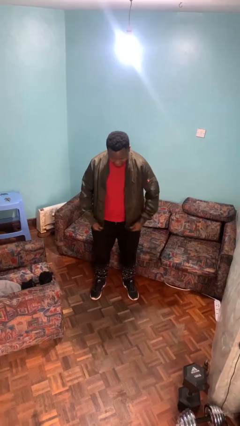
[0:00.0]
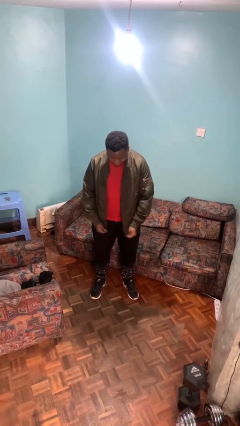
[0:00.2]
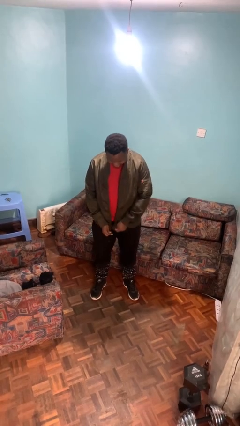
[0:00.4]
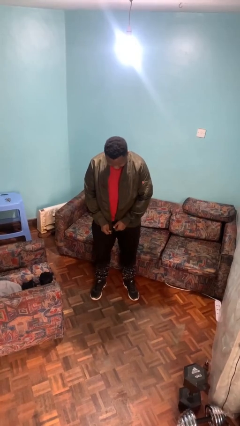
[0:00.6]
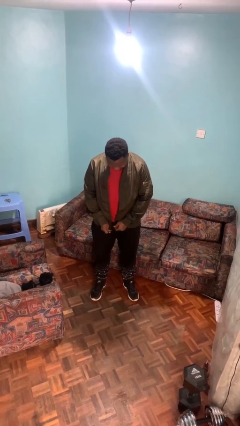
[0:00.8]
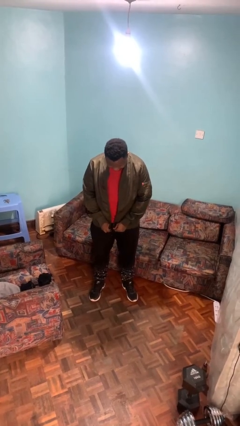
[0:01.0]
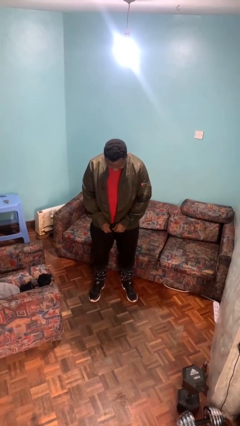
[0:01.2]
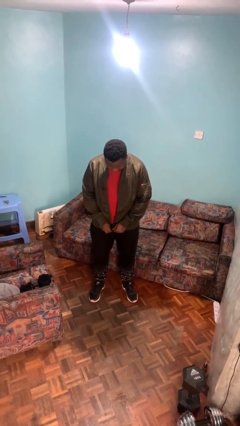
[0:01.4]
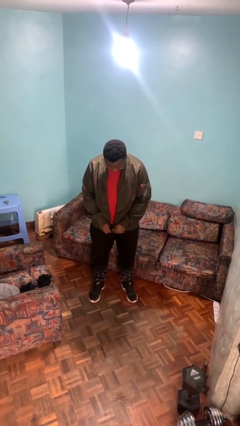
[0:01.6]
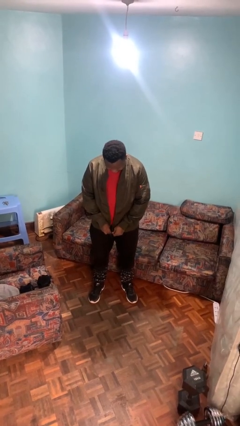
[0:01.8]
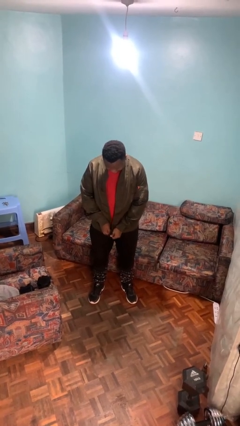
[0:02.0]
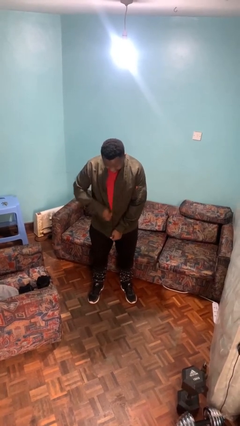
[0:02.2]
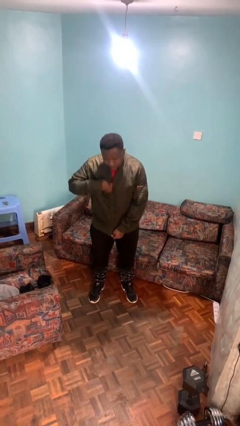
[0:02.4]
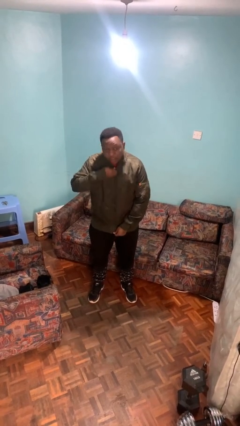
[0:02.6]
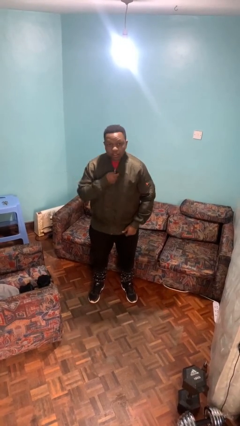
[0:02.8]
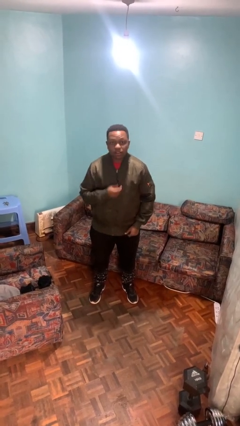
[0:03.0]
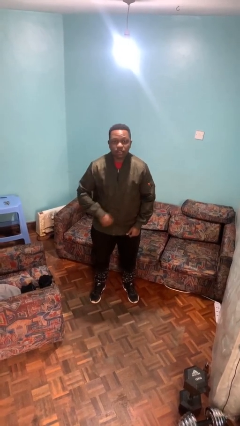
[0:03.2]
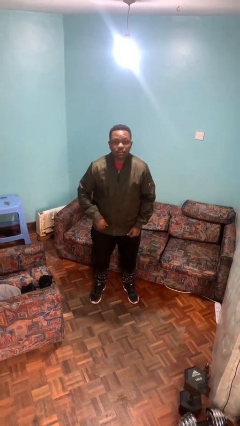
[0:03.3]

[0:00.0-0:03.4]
person zips up jacket

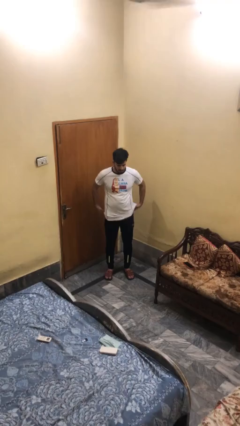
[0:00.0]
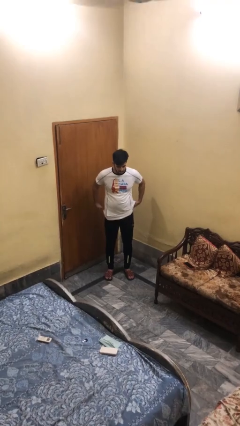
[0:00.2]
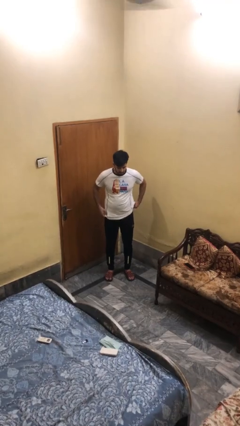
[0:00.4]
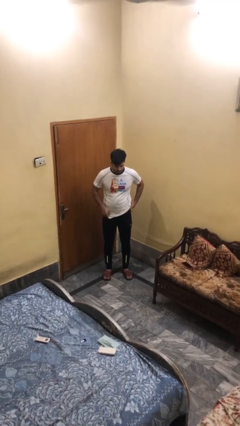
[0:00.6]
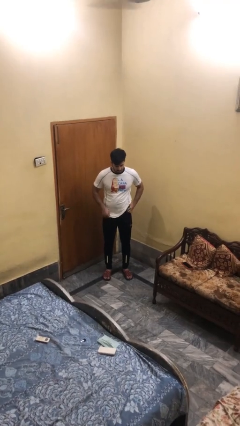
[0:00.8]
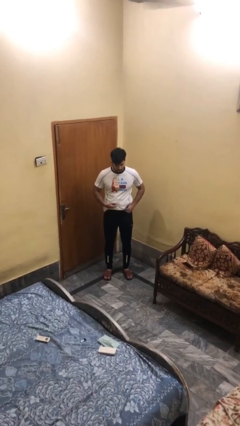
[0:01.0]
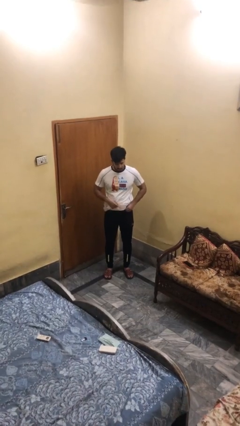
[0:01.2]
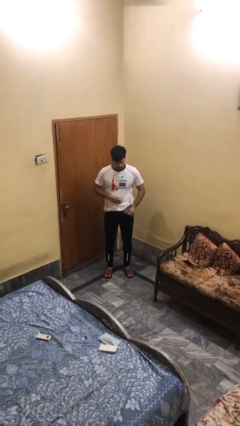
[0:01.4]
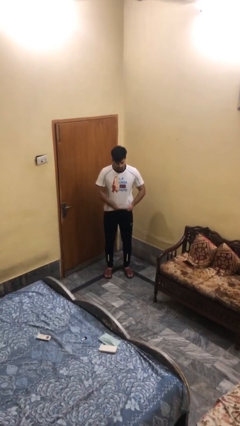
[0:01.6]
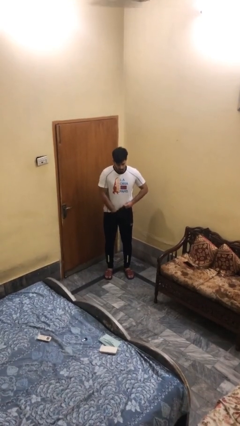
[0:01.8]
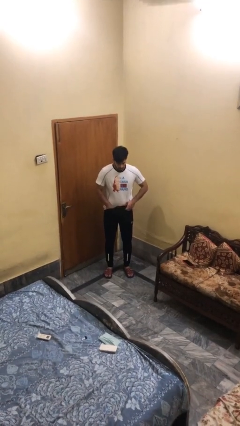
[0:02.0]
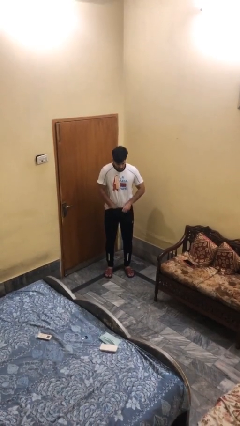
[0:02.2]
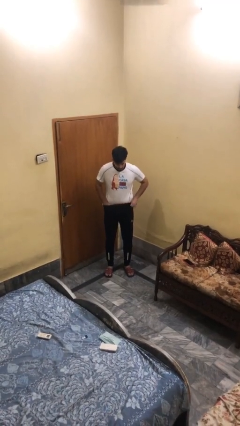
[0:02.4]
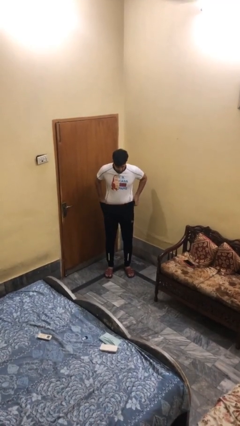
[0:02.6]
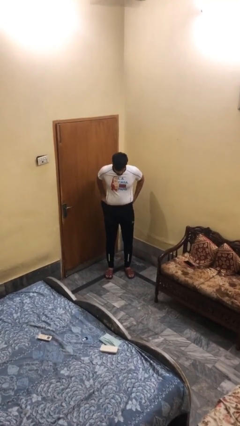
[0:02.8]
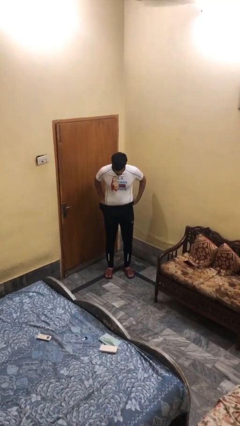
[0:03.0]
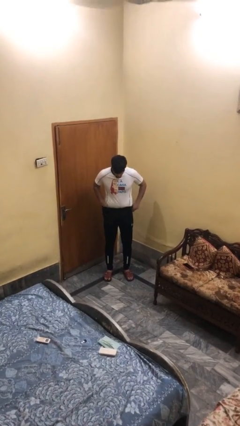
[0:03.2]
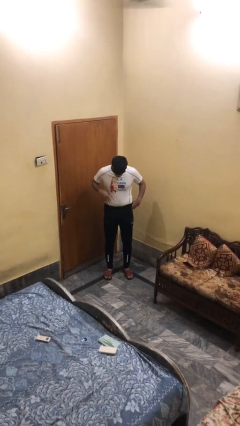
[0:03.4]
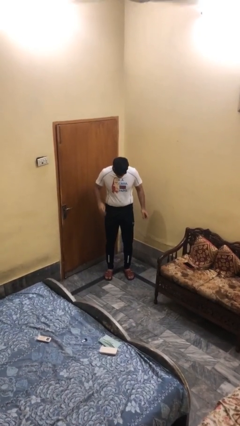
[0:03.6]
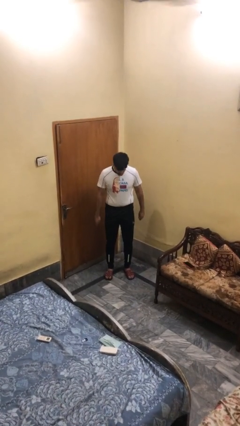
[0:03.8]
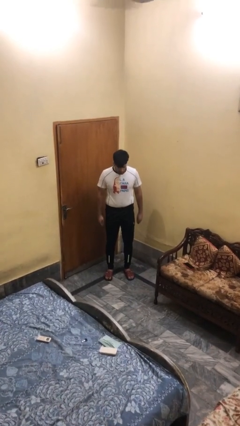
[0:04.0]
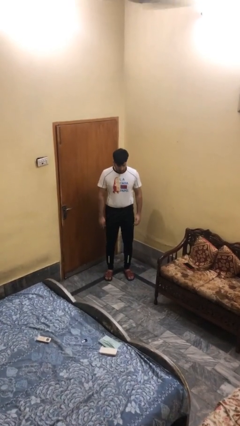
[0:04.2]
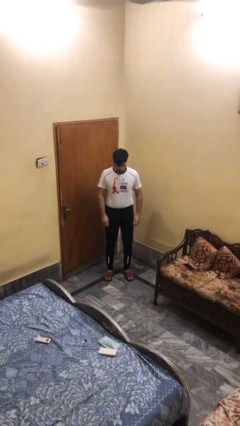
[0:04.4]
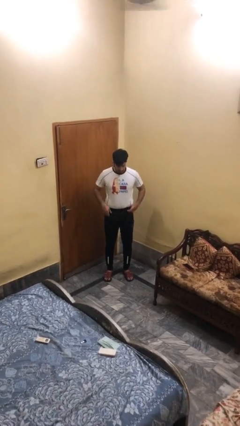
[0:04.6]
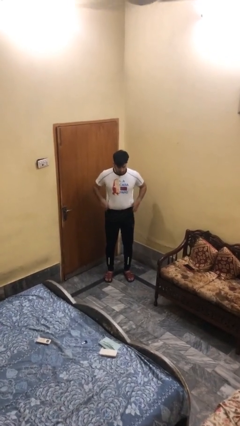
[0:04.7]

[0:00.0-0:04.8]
person tucks in shirt

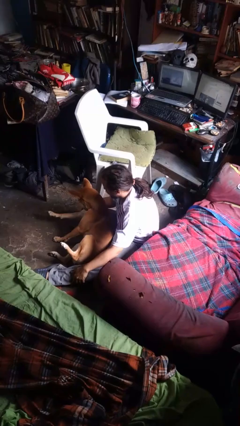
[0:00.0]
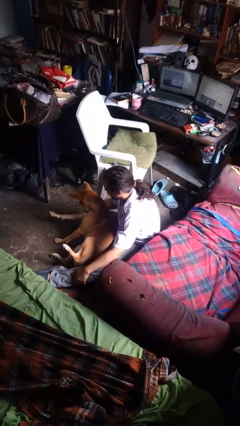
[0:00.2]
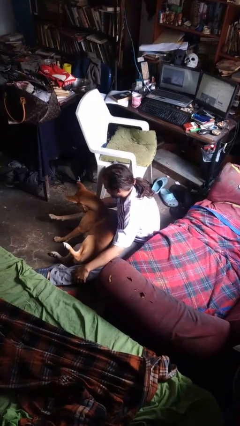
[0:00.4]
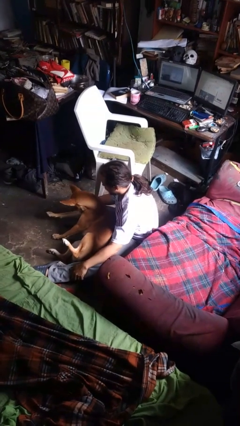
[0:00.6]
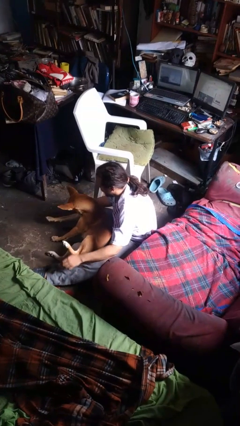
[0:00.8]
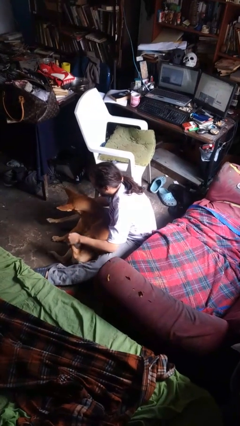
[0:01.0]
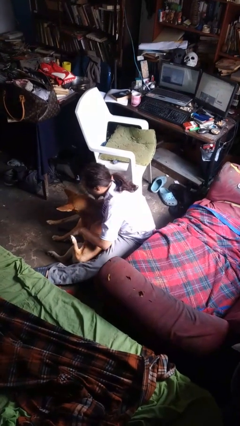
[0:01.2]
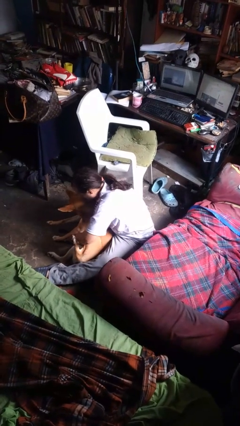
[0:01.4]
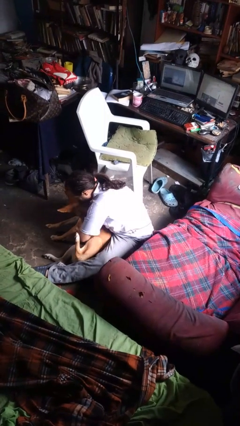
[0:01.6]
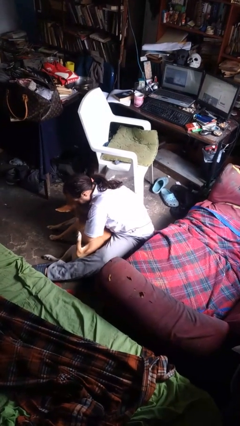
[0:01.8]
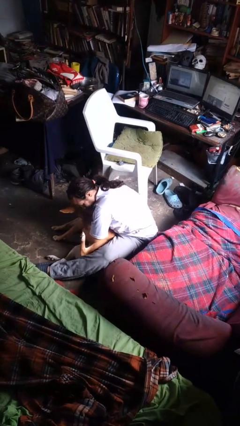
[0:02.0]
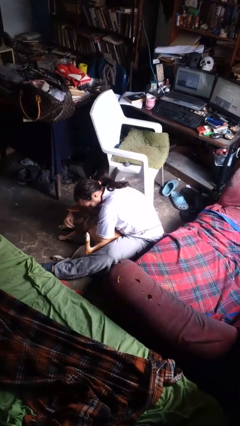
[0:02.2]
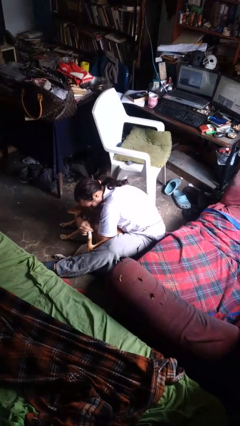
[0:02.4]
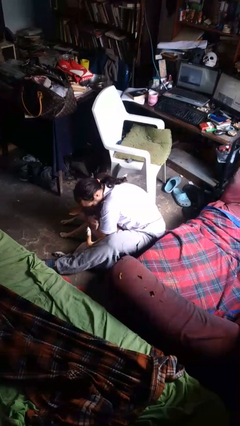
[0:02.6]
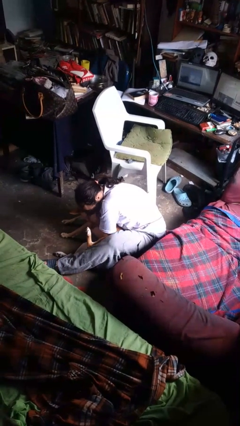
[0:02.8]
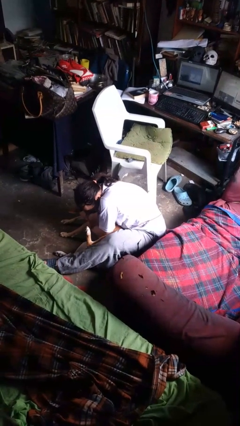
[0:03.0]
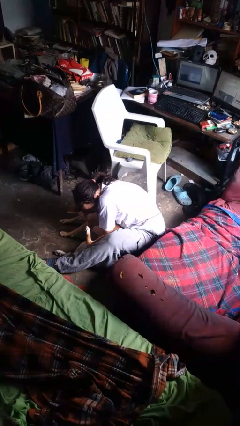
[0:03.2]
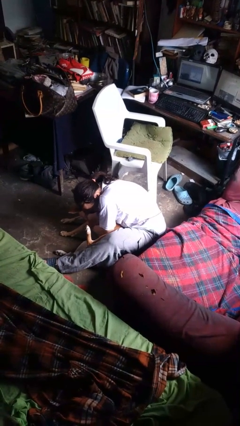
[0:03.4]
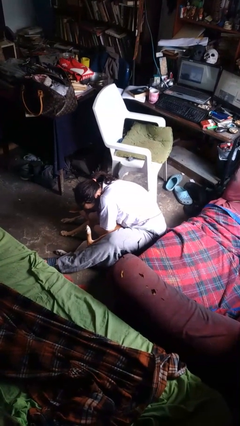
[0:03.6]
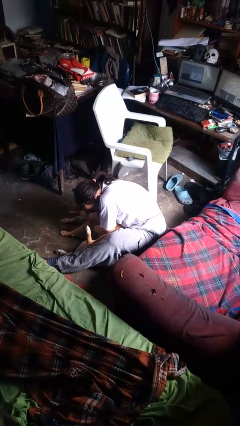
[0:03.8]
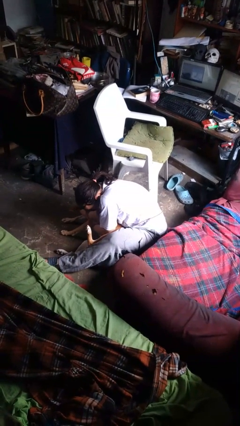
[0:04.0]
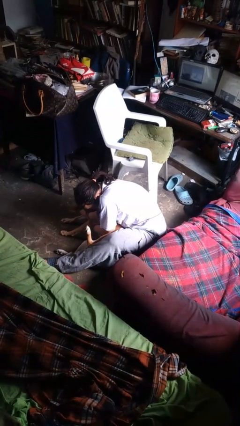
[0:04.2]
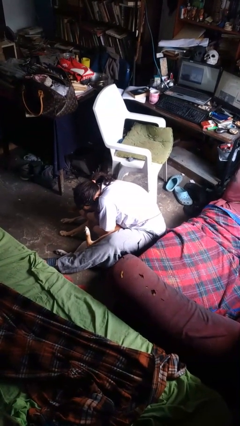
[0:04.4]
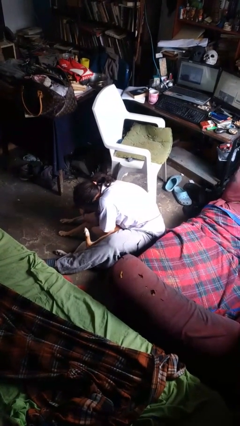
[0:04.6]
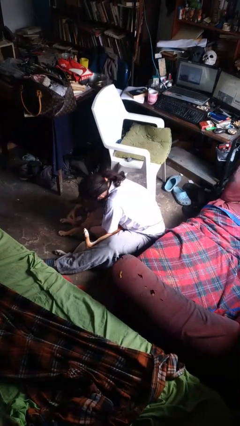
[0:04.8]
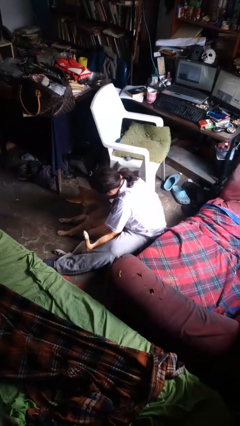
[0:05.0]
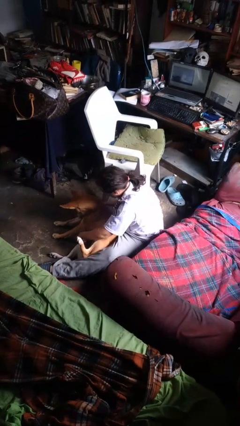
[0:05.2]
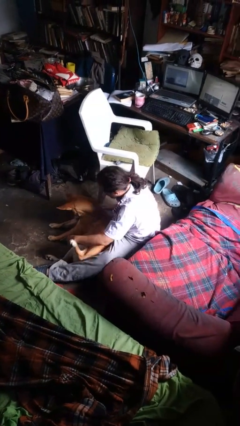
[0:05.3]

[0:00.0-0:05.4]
person hugs dog

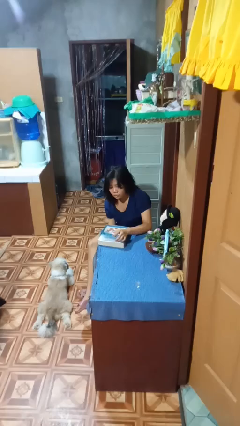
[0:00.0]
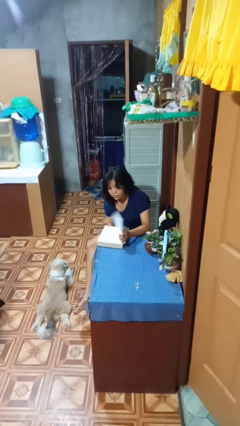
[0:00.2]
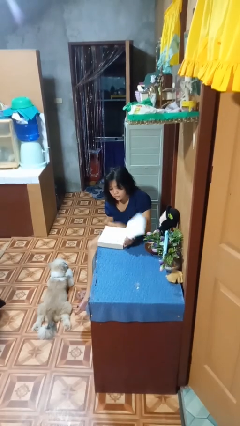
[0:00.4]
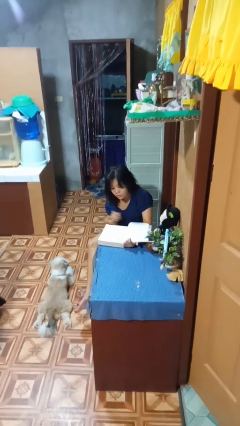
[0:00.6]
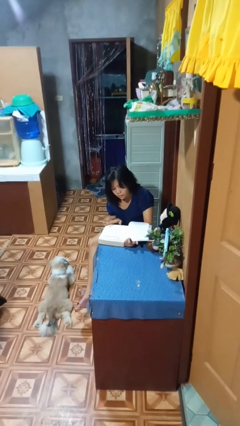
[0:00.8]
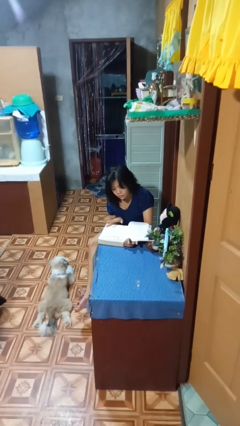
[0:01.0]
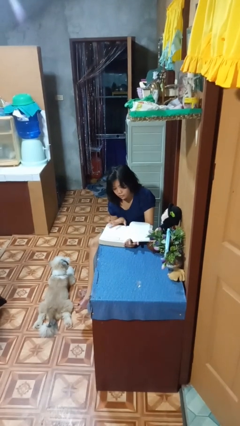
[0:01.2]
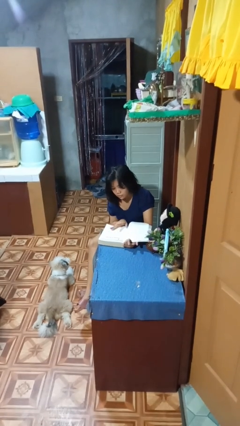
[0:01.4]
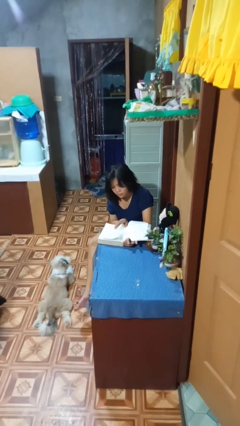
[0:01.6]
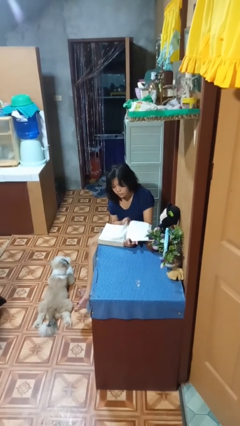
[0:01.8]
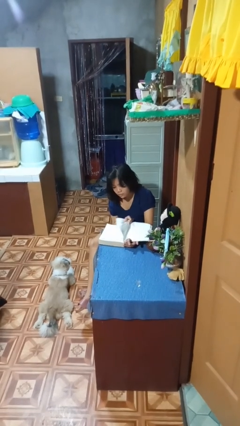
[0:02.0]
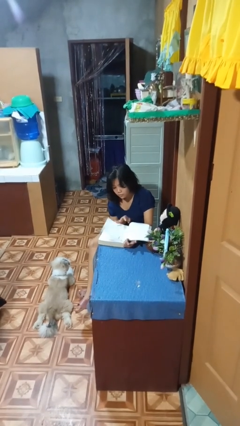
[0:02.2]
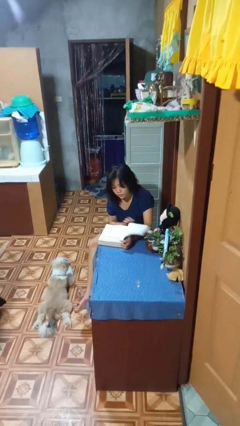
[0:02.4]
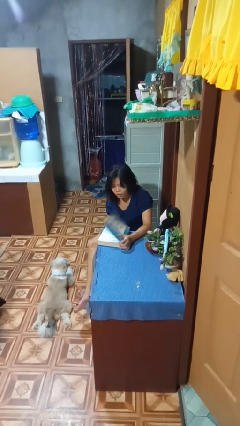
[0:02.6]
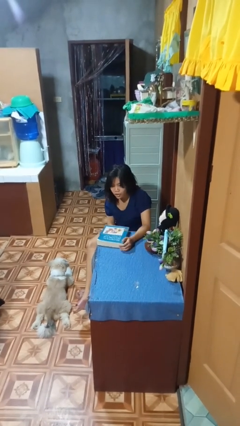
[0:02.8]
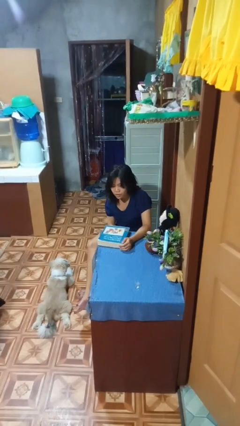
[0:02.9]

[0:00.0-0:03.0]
person reads book

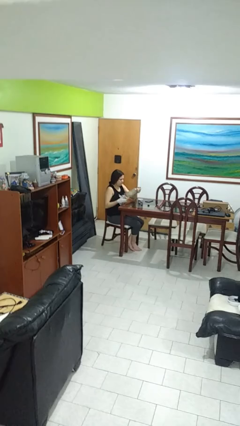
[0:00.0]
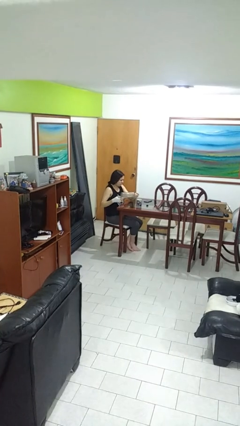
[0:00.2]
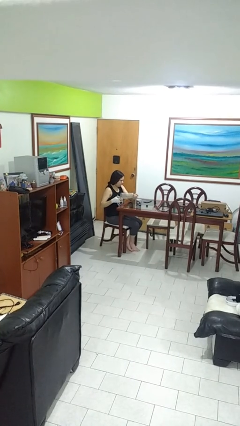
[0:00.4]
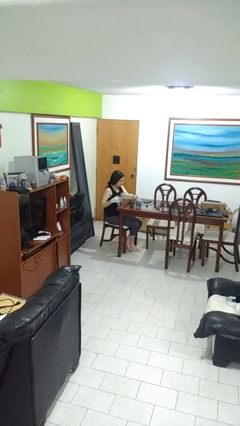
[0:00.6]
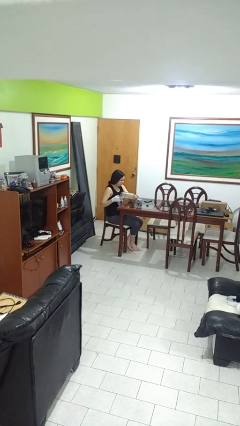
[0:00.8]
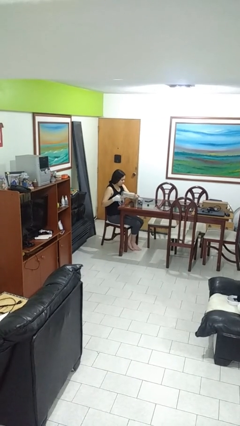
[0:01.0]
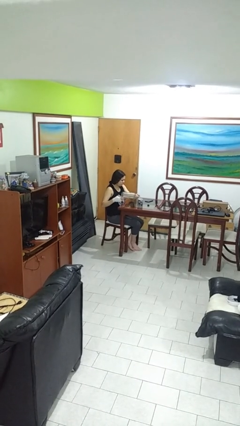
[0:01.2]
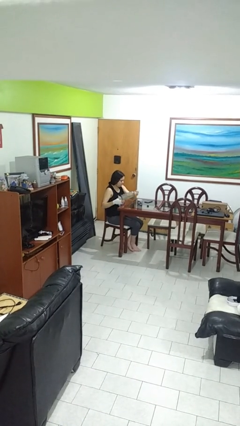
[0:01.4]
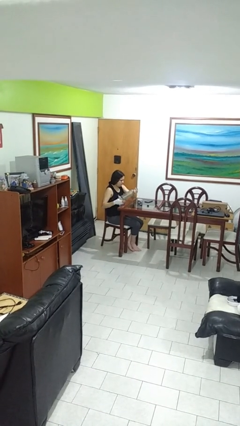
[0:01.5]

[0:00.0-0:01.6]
person pours liquid into cup
